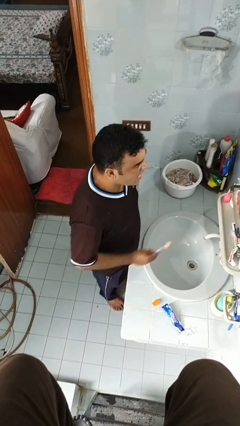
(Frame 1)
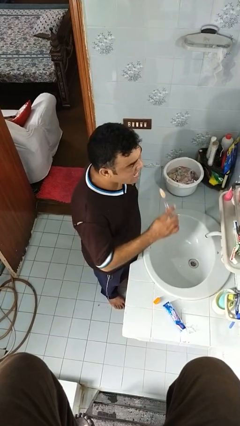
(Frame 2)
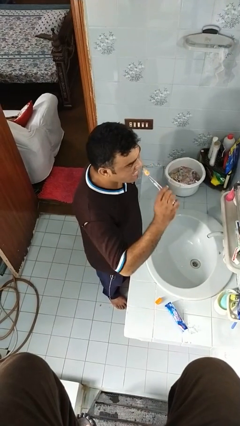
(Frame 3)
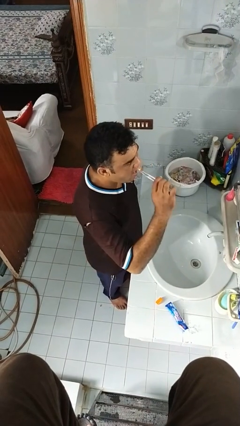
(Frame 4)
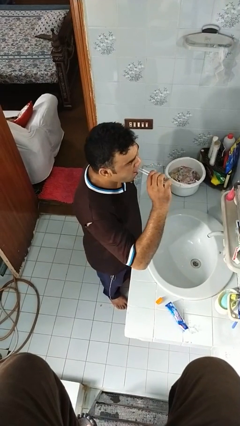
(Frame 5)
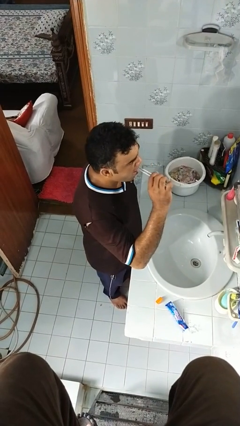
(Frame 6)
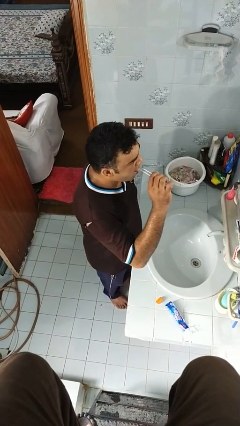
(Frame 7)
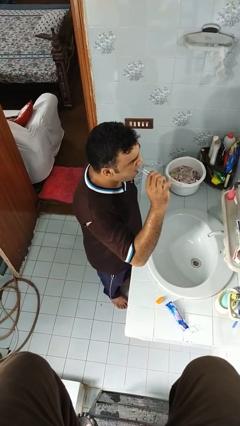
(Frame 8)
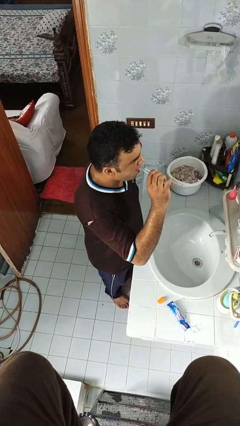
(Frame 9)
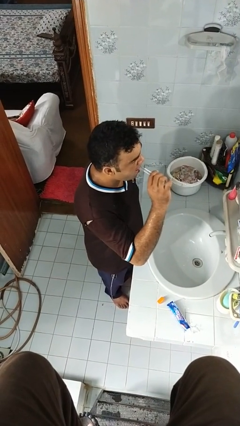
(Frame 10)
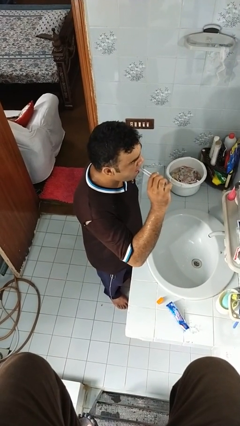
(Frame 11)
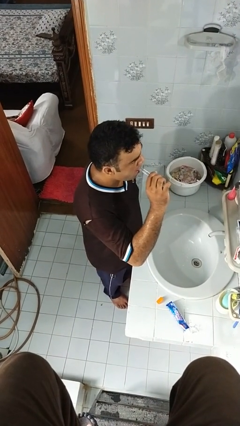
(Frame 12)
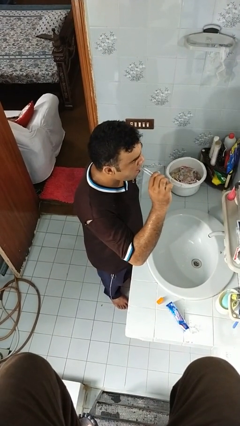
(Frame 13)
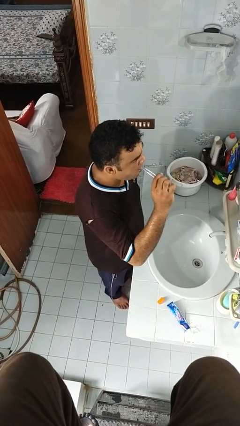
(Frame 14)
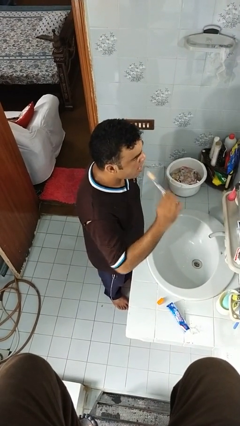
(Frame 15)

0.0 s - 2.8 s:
person brushes teeth

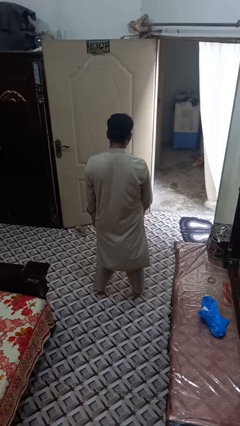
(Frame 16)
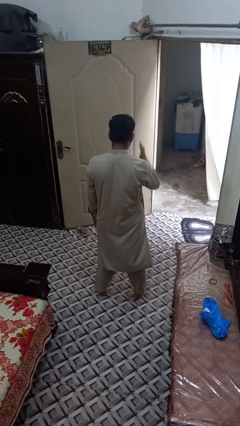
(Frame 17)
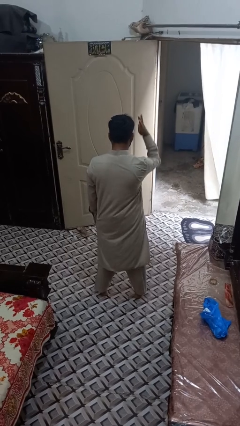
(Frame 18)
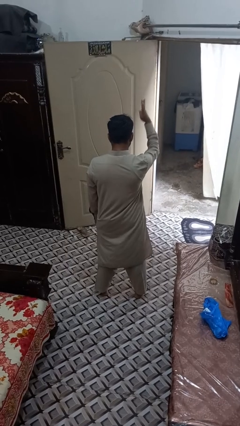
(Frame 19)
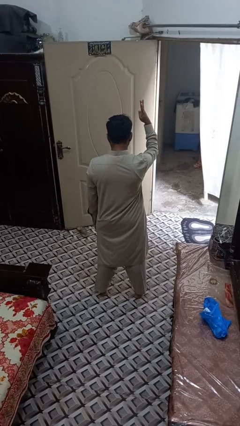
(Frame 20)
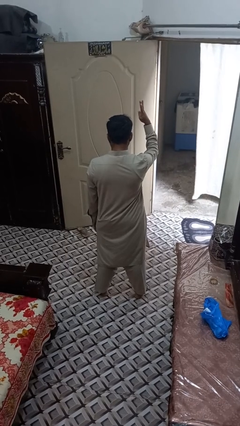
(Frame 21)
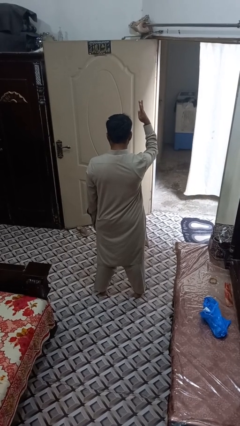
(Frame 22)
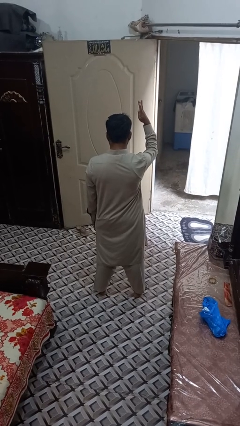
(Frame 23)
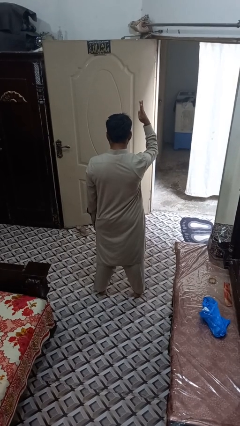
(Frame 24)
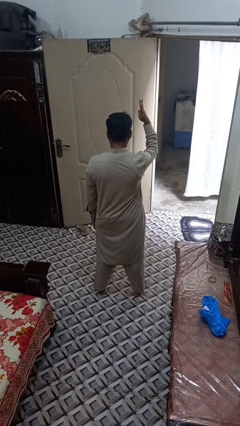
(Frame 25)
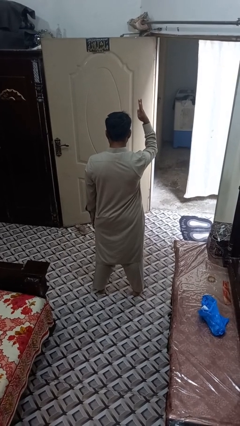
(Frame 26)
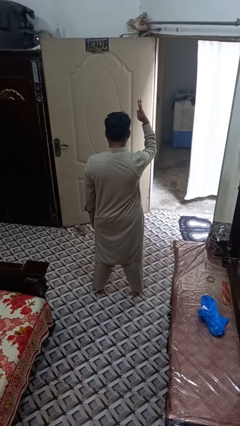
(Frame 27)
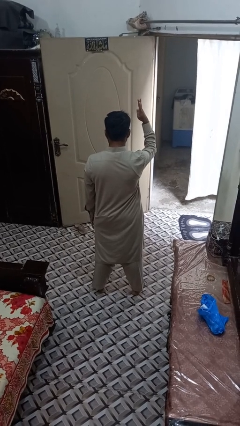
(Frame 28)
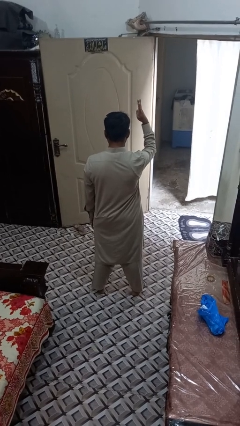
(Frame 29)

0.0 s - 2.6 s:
person gestures number four

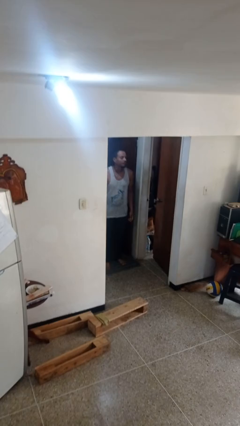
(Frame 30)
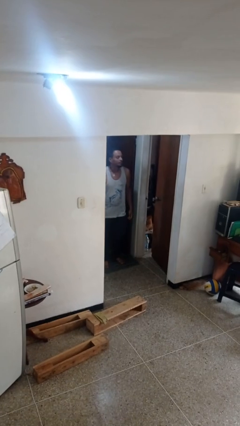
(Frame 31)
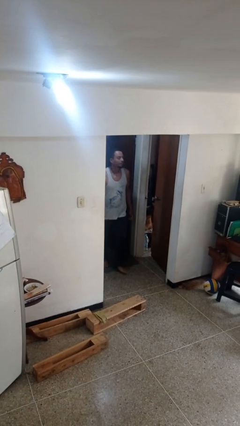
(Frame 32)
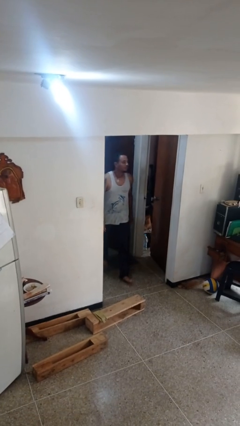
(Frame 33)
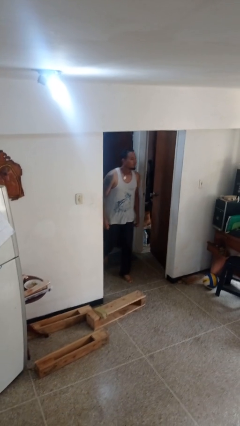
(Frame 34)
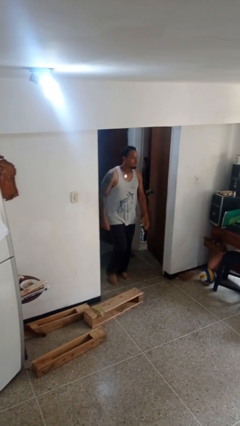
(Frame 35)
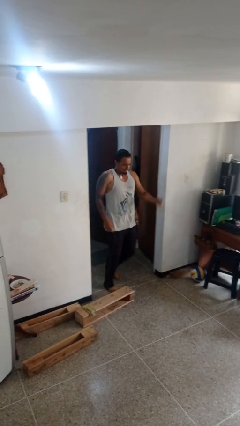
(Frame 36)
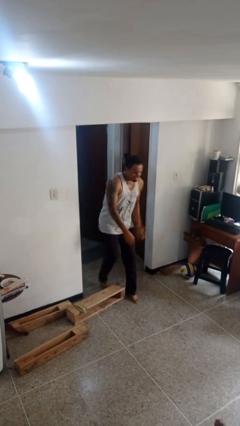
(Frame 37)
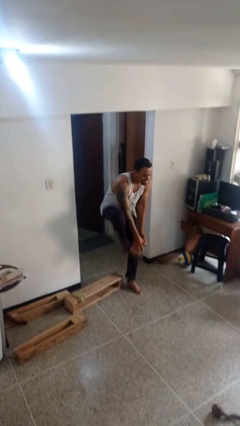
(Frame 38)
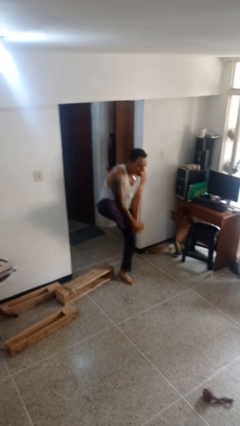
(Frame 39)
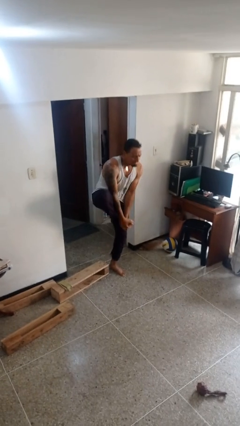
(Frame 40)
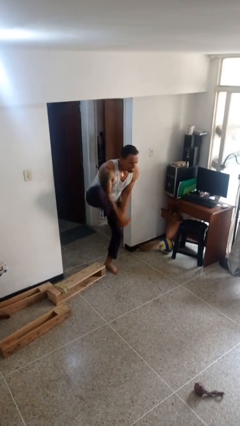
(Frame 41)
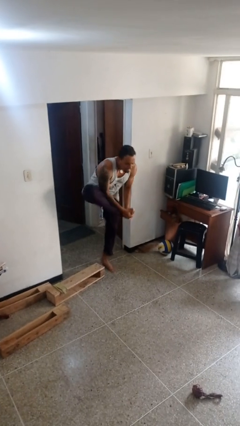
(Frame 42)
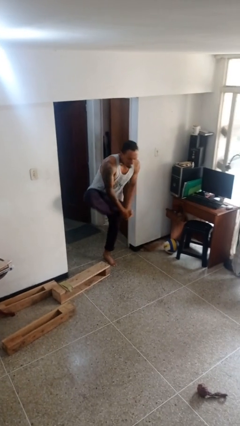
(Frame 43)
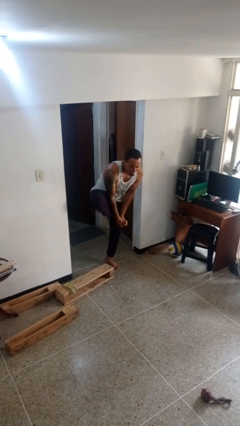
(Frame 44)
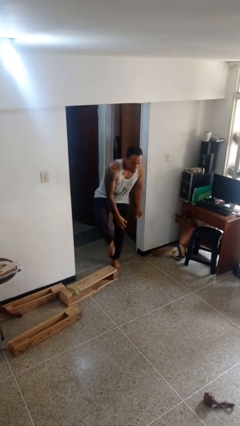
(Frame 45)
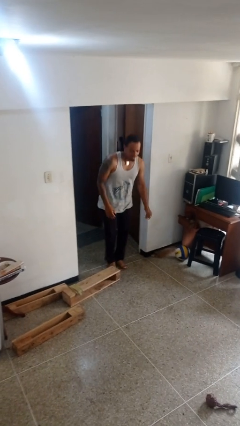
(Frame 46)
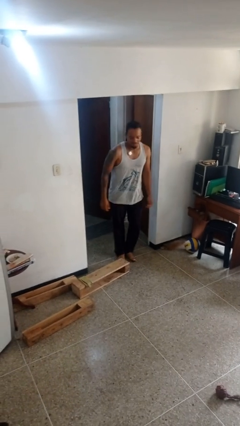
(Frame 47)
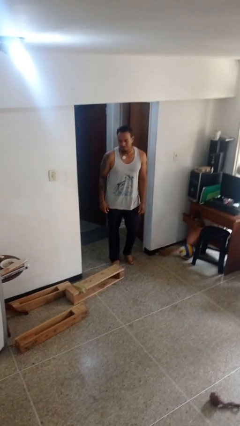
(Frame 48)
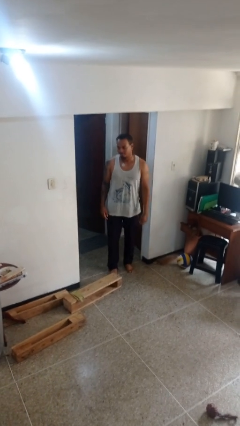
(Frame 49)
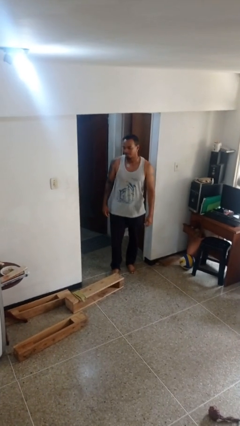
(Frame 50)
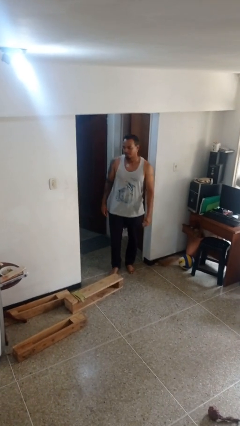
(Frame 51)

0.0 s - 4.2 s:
person stubs toe

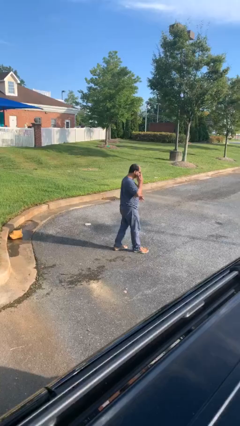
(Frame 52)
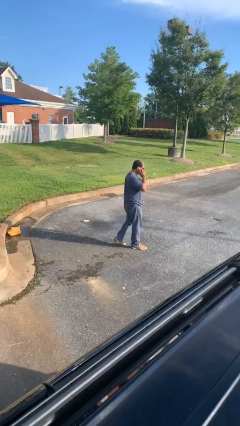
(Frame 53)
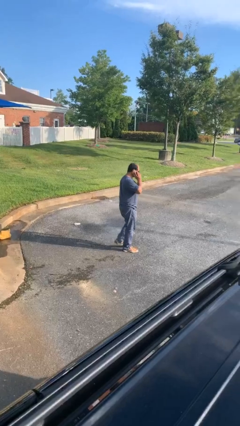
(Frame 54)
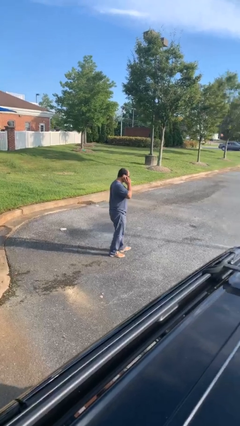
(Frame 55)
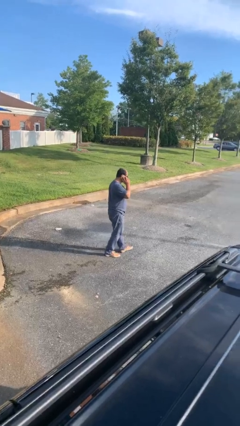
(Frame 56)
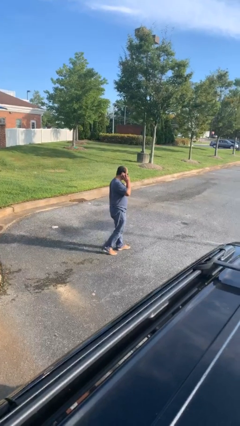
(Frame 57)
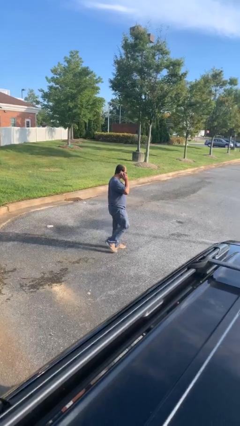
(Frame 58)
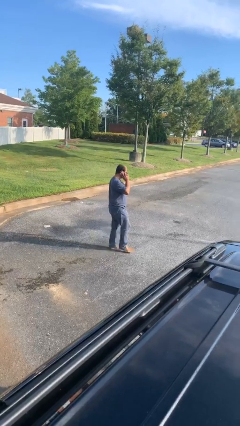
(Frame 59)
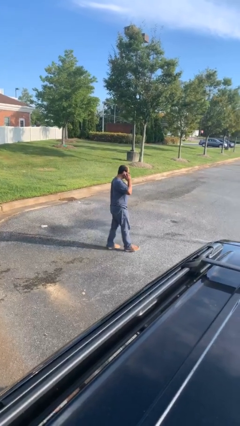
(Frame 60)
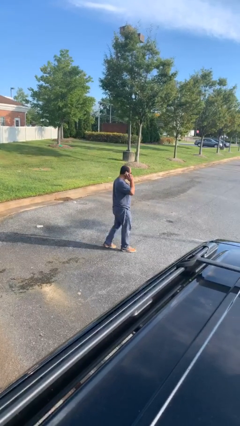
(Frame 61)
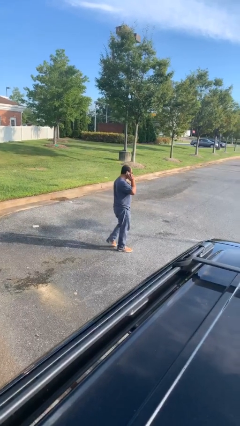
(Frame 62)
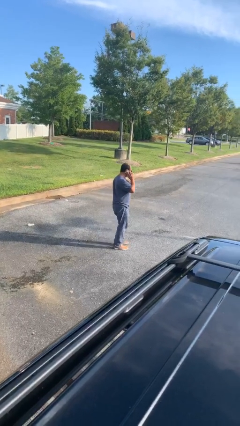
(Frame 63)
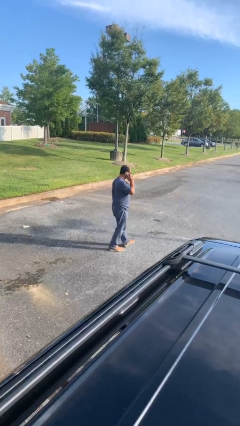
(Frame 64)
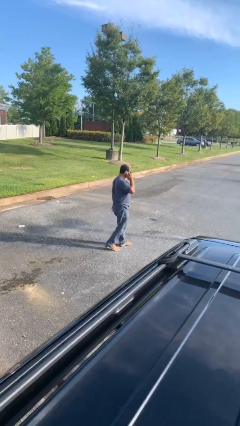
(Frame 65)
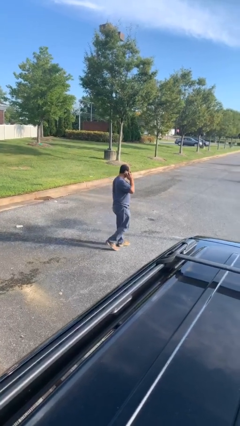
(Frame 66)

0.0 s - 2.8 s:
person talks on phone

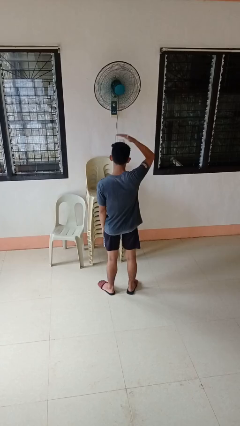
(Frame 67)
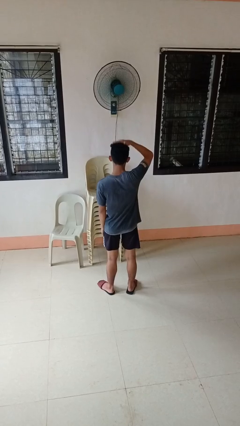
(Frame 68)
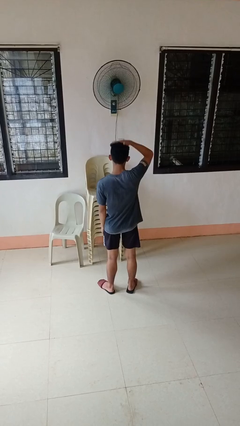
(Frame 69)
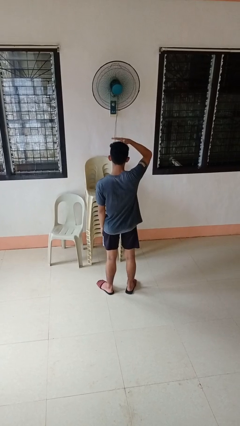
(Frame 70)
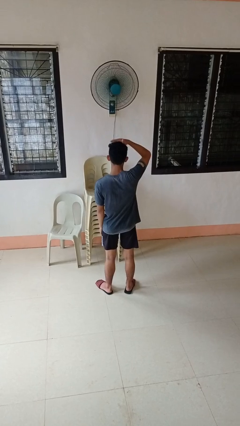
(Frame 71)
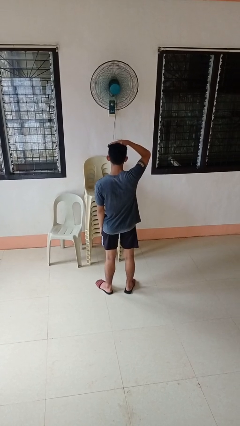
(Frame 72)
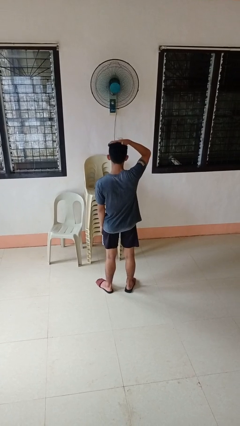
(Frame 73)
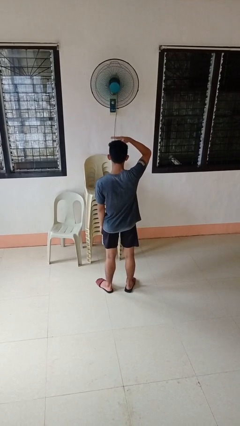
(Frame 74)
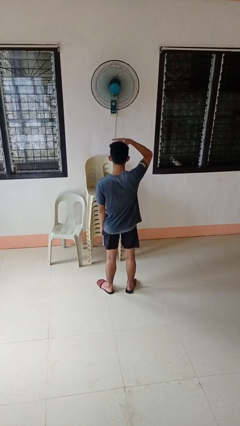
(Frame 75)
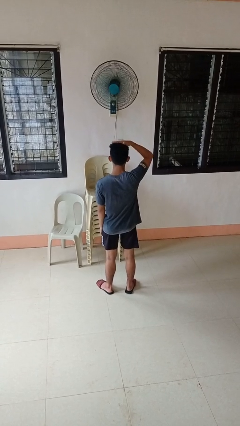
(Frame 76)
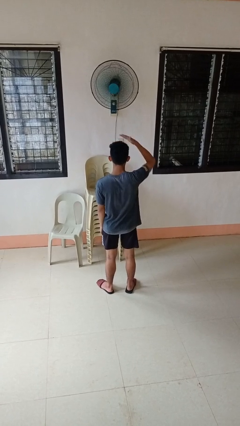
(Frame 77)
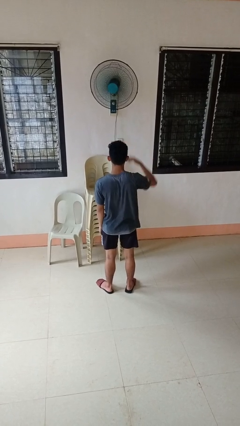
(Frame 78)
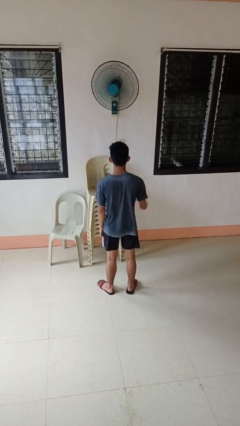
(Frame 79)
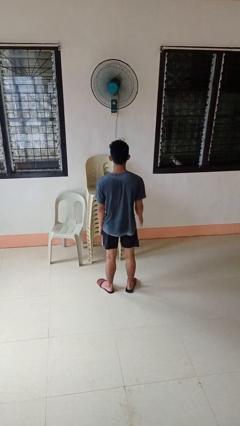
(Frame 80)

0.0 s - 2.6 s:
person pats head

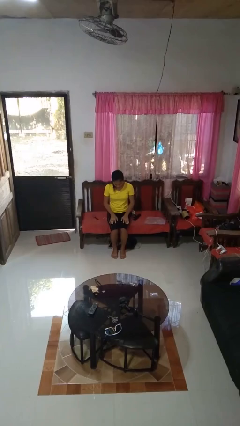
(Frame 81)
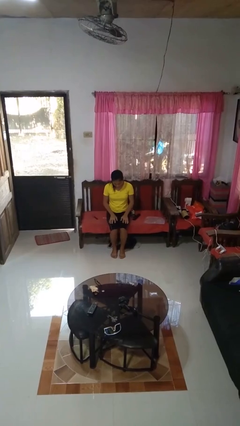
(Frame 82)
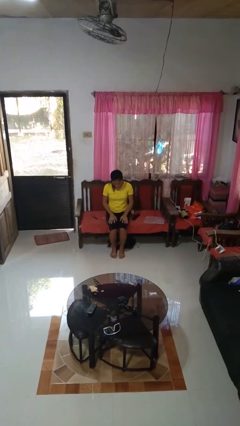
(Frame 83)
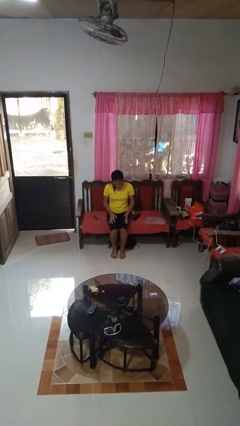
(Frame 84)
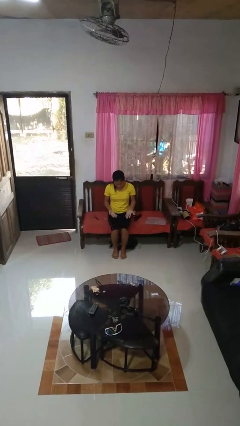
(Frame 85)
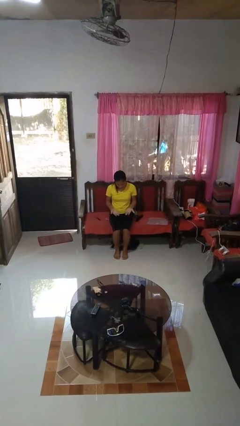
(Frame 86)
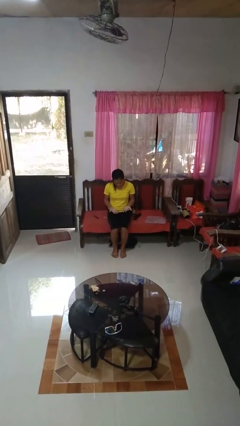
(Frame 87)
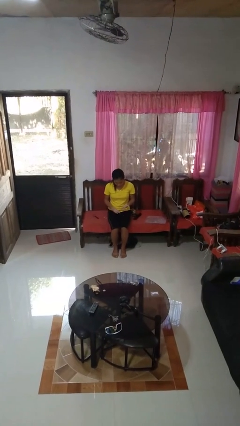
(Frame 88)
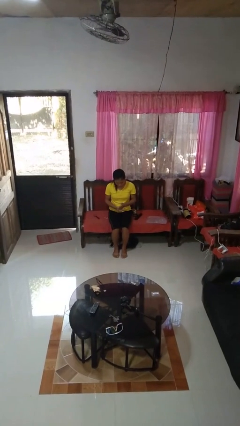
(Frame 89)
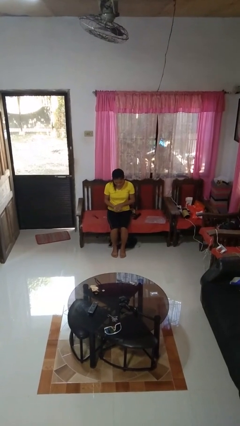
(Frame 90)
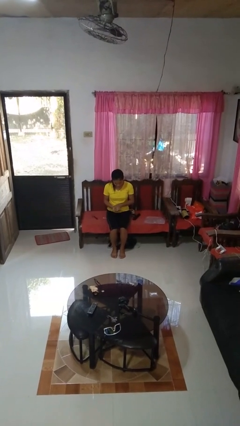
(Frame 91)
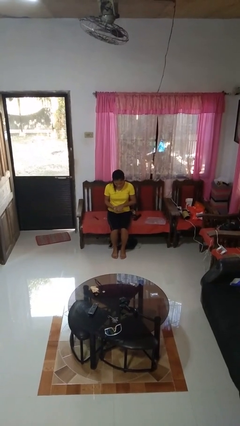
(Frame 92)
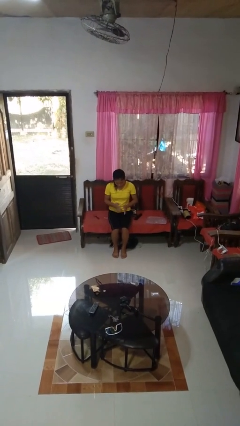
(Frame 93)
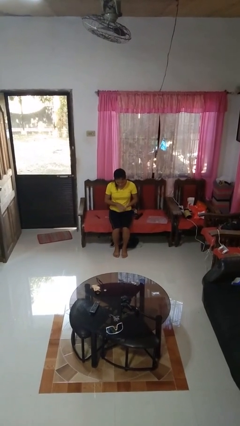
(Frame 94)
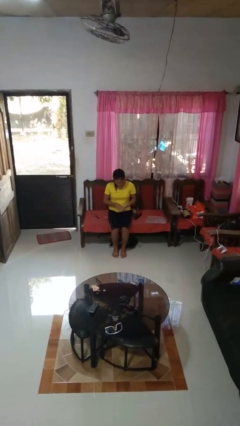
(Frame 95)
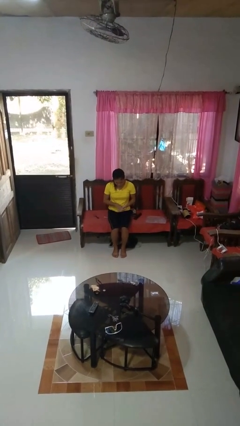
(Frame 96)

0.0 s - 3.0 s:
person looks at hands in lap
